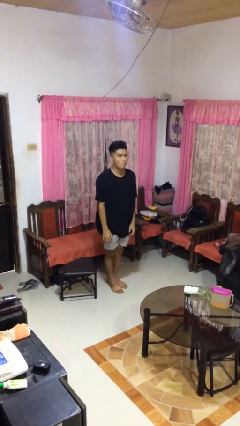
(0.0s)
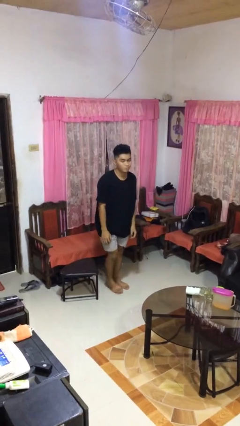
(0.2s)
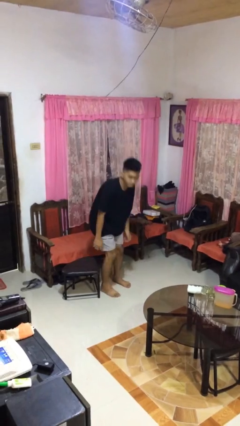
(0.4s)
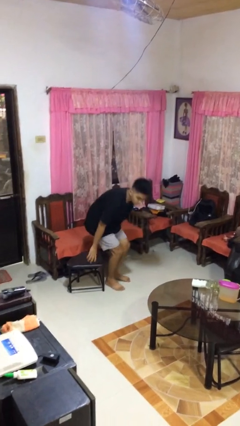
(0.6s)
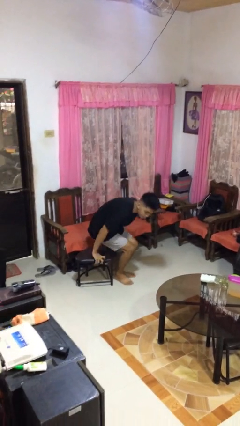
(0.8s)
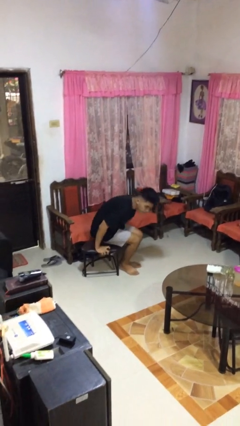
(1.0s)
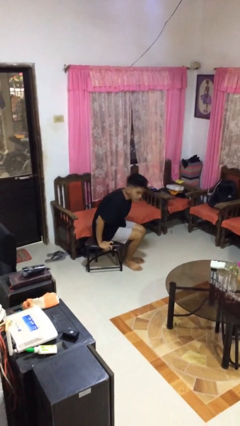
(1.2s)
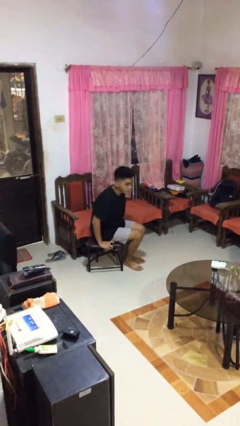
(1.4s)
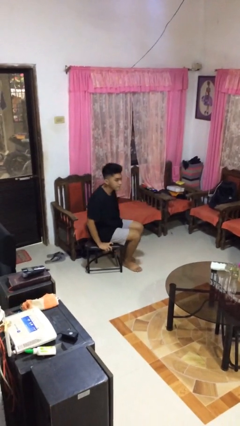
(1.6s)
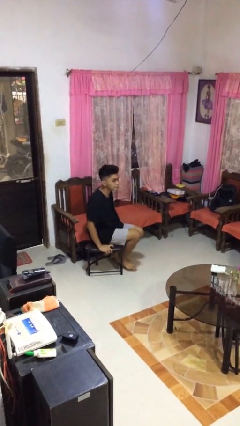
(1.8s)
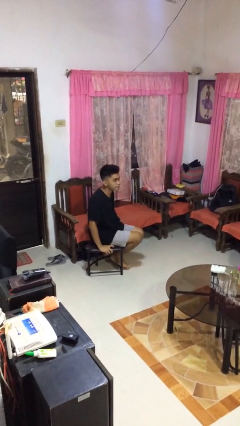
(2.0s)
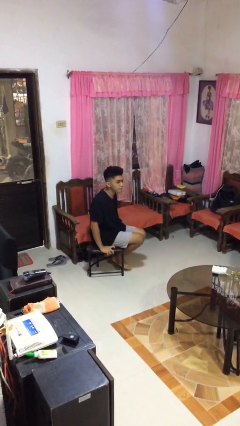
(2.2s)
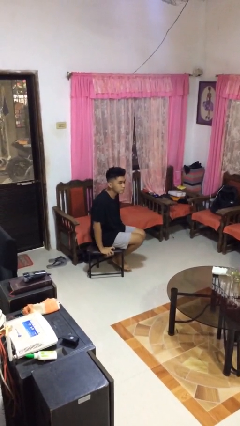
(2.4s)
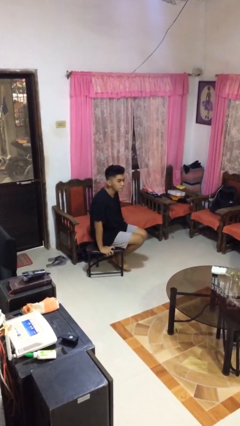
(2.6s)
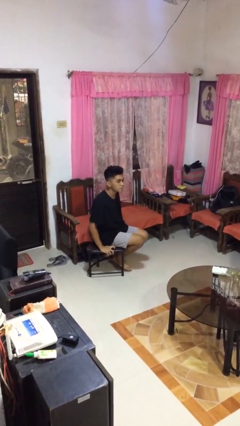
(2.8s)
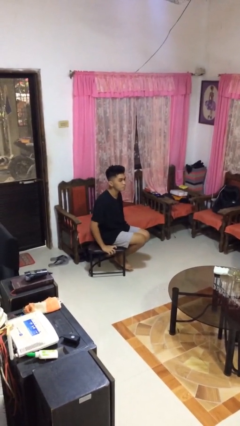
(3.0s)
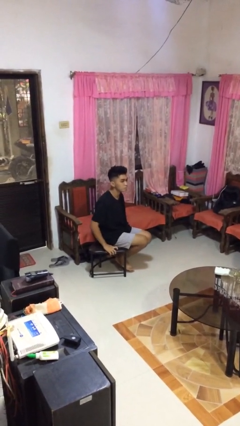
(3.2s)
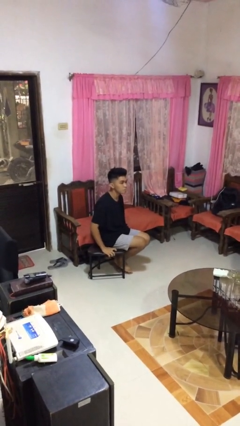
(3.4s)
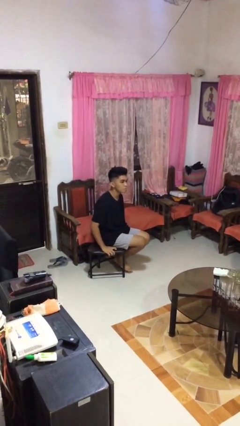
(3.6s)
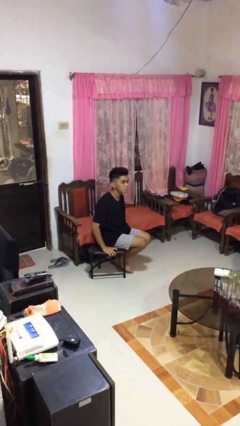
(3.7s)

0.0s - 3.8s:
person sits down

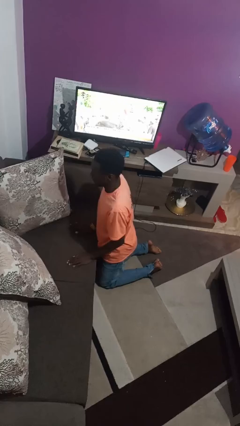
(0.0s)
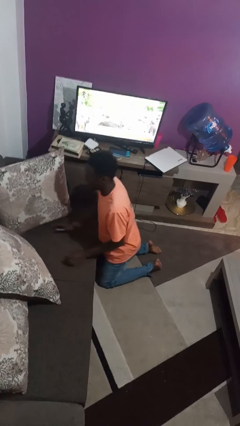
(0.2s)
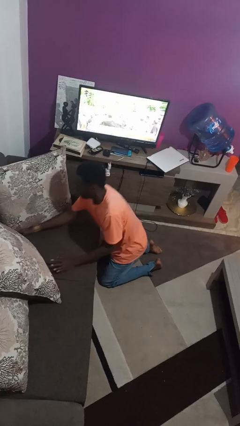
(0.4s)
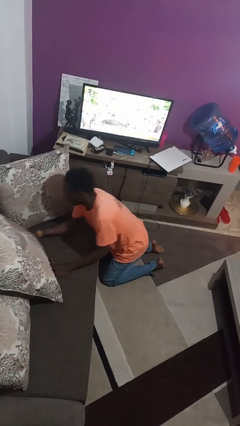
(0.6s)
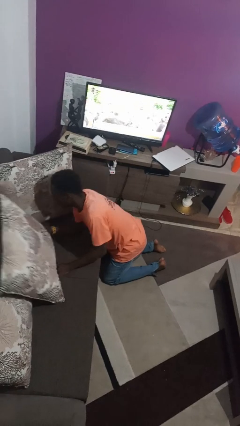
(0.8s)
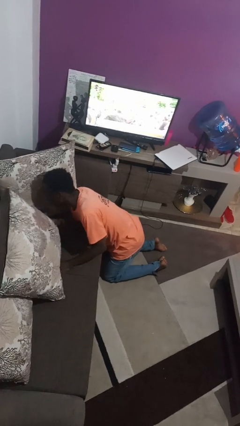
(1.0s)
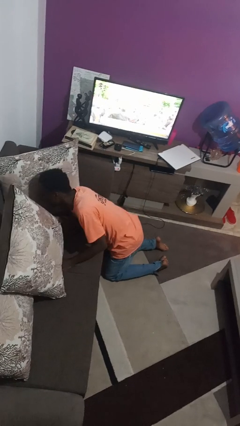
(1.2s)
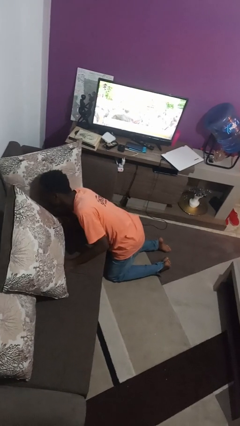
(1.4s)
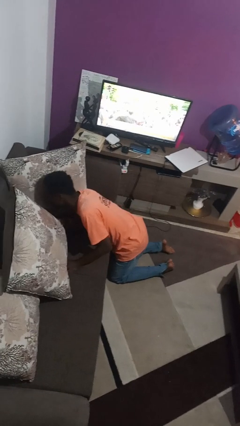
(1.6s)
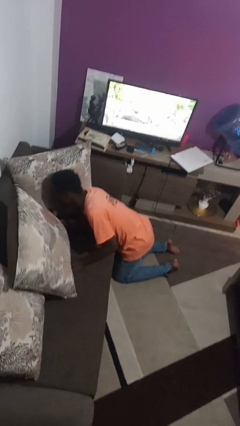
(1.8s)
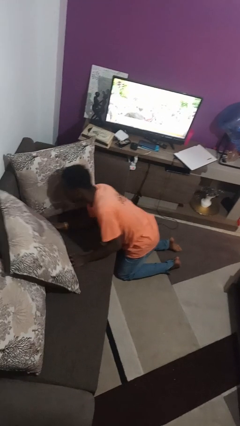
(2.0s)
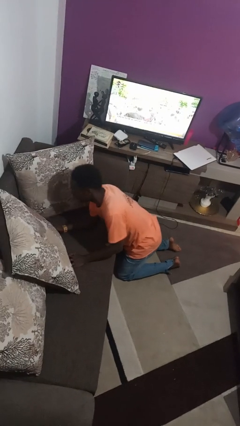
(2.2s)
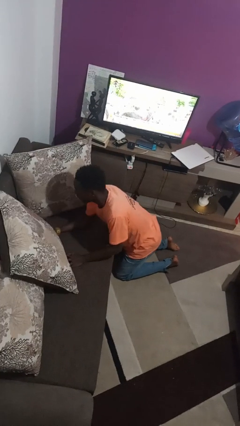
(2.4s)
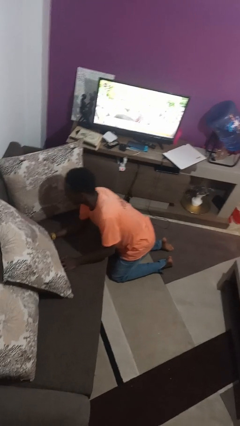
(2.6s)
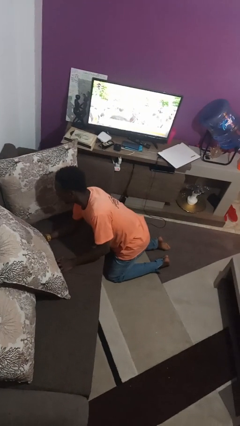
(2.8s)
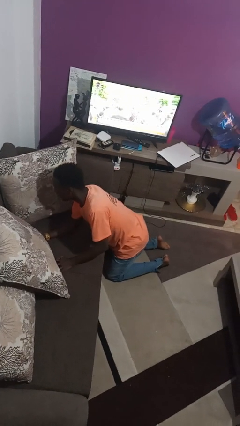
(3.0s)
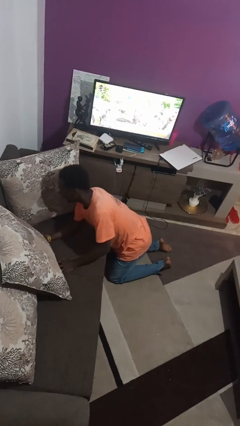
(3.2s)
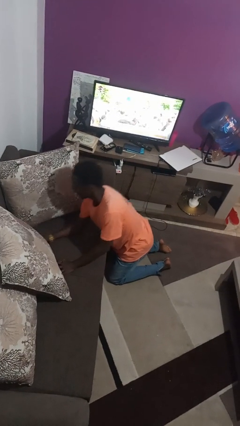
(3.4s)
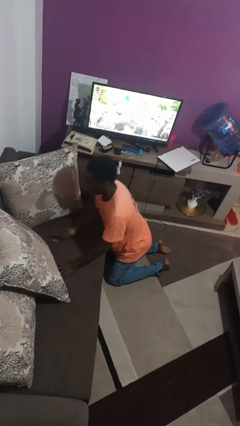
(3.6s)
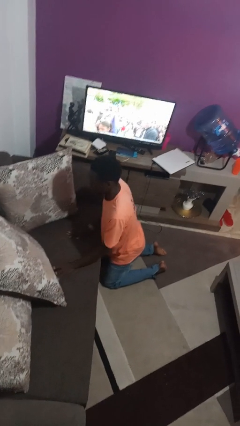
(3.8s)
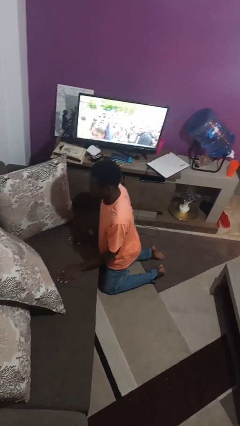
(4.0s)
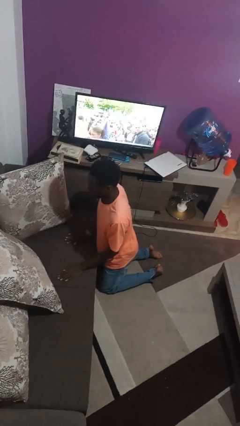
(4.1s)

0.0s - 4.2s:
person searches in couch

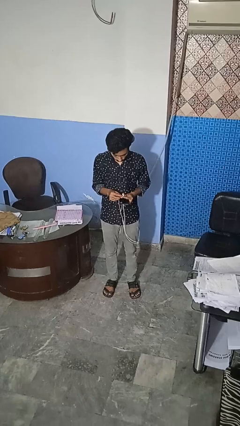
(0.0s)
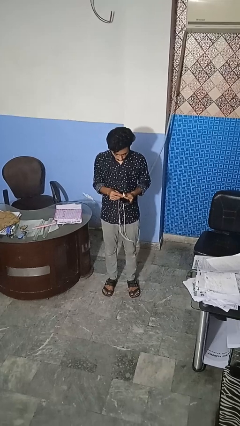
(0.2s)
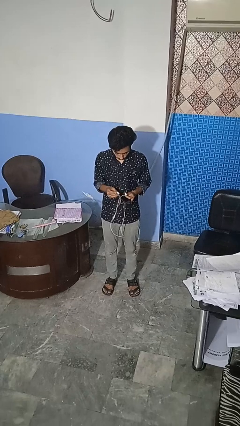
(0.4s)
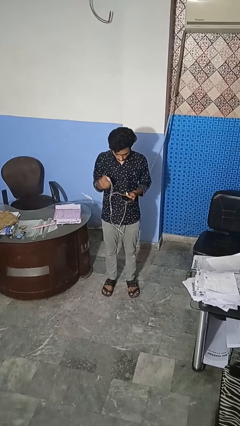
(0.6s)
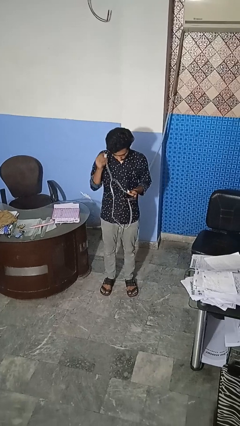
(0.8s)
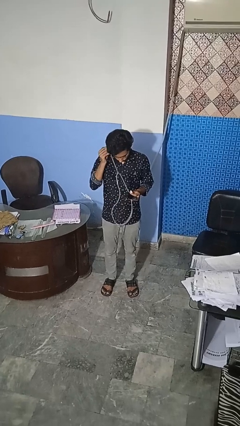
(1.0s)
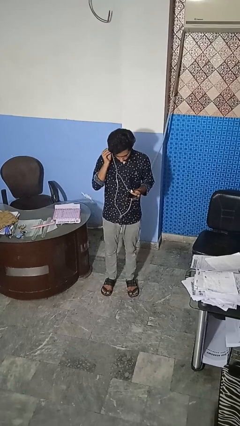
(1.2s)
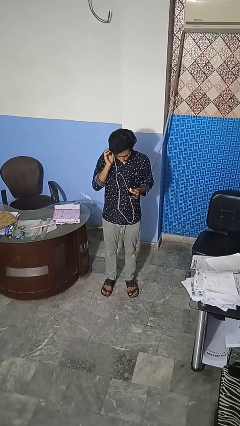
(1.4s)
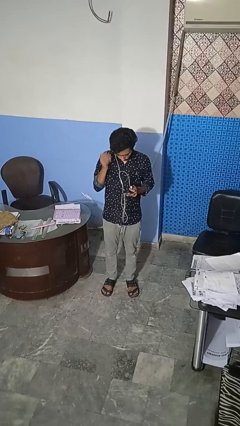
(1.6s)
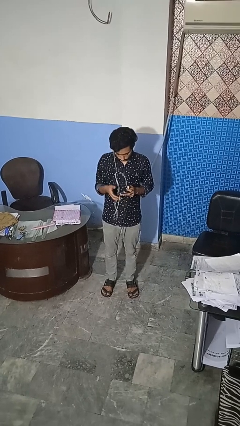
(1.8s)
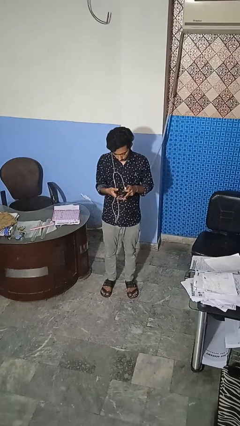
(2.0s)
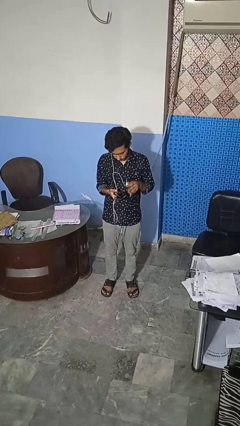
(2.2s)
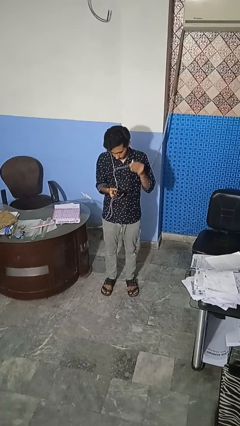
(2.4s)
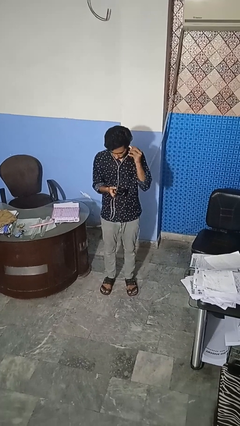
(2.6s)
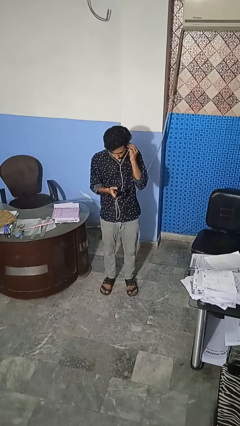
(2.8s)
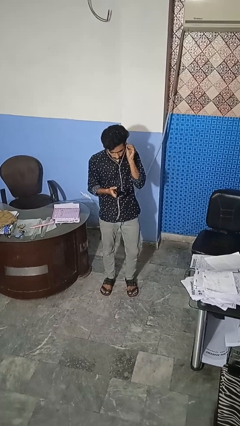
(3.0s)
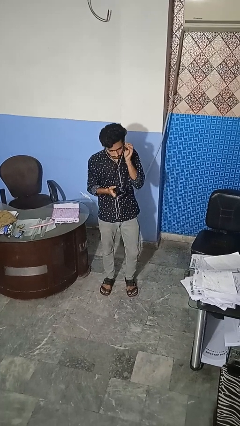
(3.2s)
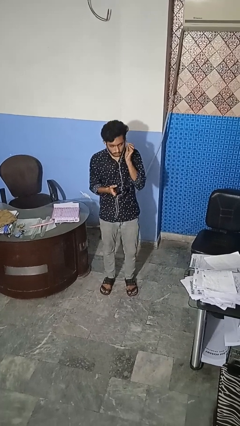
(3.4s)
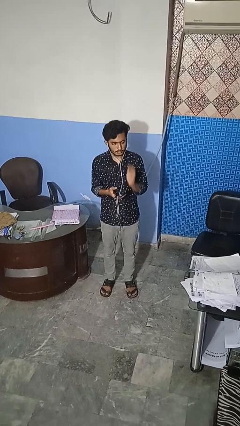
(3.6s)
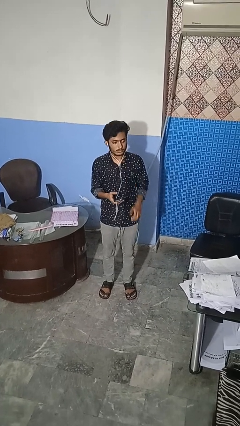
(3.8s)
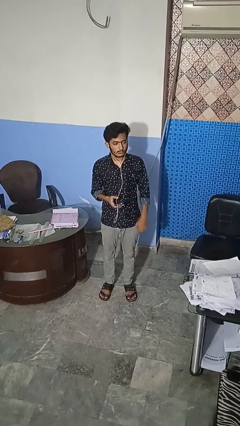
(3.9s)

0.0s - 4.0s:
person puts on headphones

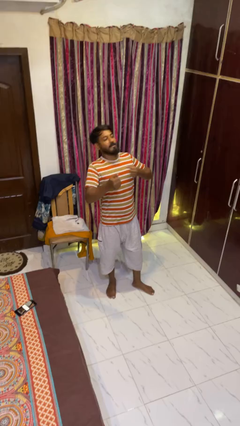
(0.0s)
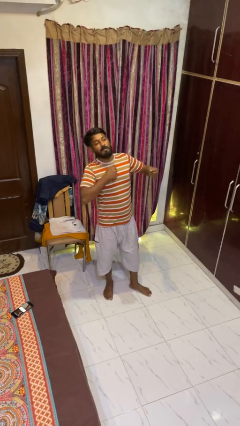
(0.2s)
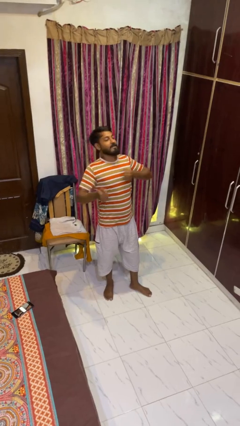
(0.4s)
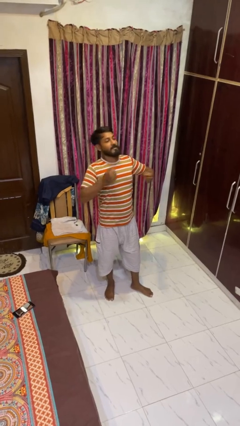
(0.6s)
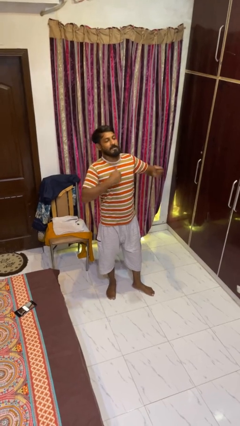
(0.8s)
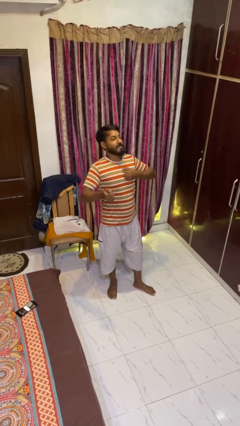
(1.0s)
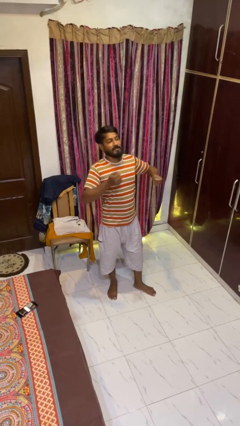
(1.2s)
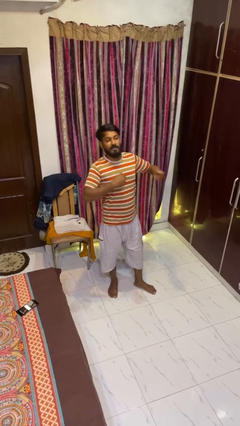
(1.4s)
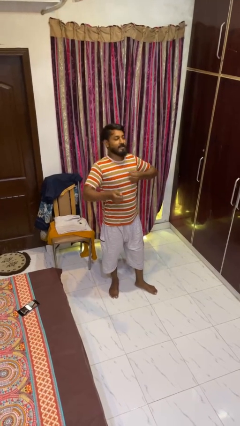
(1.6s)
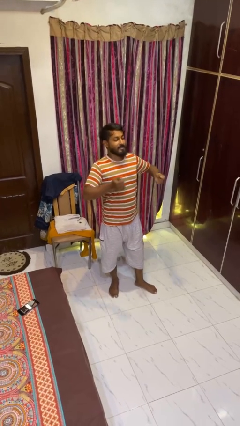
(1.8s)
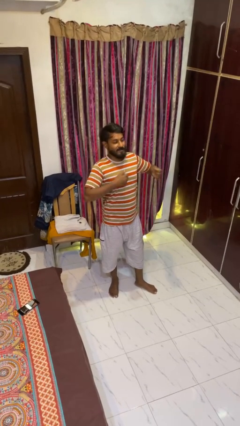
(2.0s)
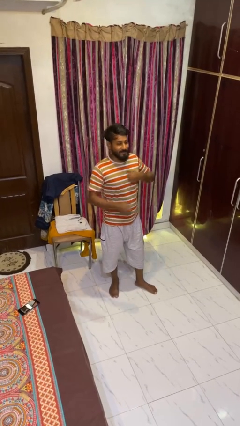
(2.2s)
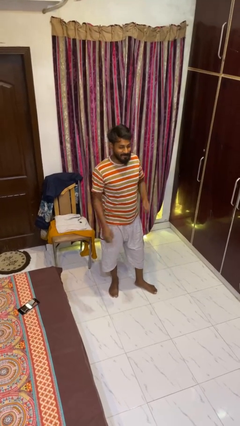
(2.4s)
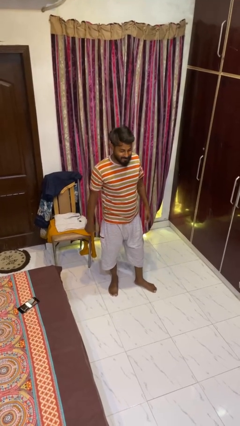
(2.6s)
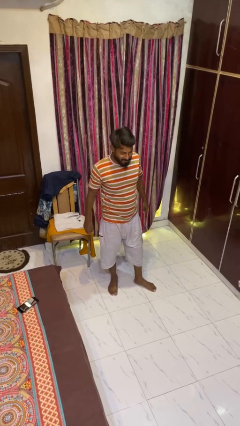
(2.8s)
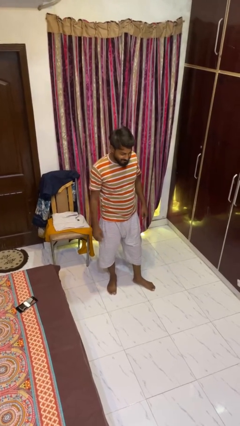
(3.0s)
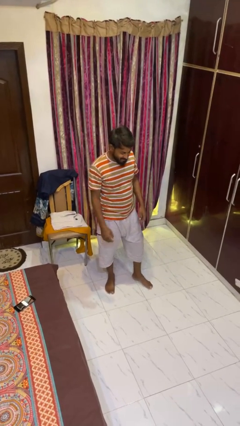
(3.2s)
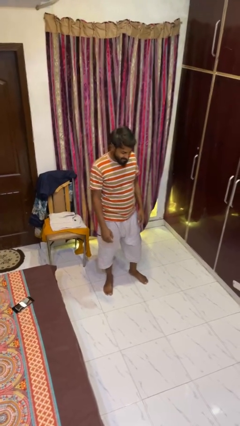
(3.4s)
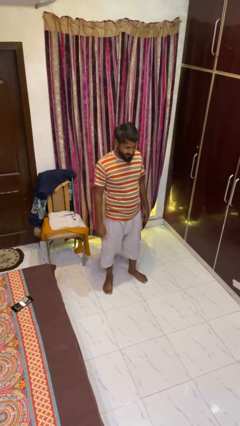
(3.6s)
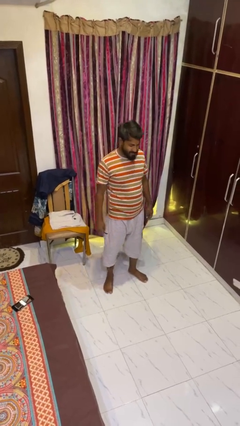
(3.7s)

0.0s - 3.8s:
person drums on chest

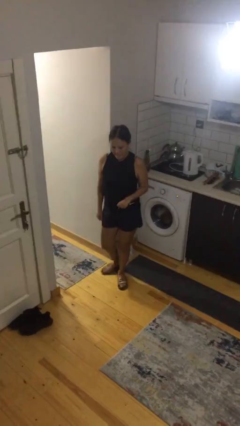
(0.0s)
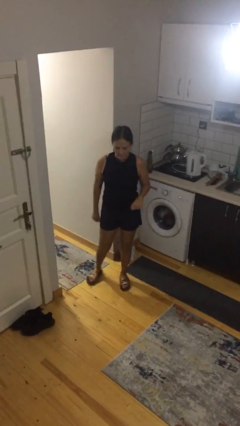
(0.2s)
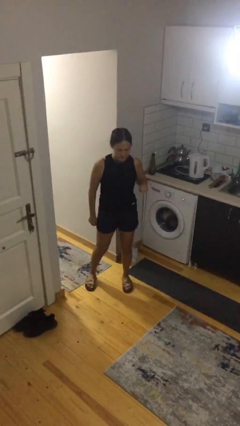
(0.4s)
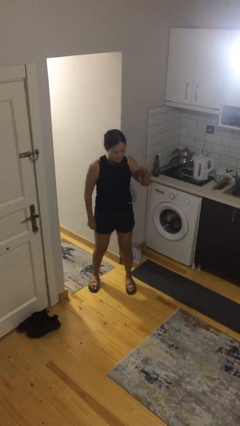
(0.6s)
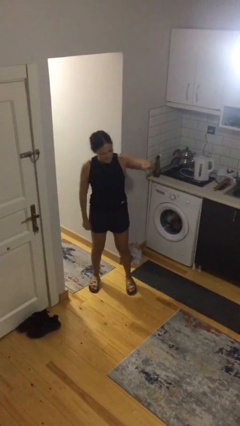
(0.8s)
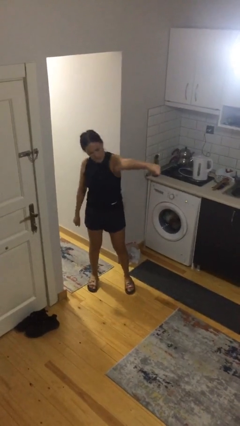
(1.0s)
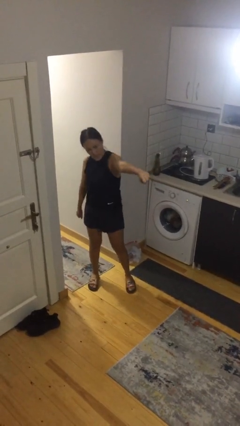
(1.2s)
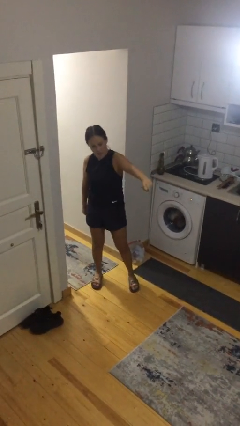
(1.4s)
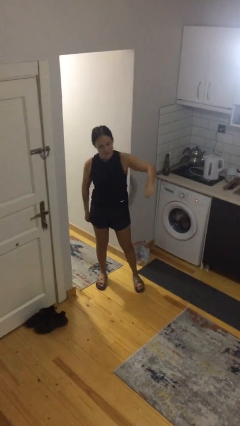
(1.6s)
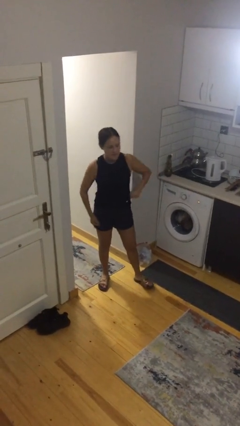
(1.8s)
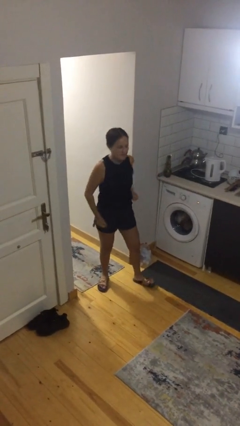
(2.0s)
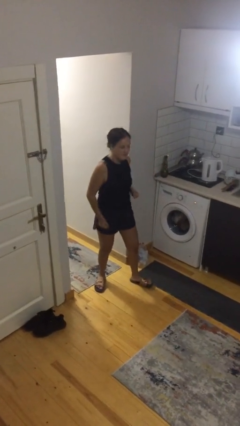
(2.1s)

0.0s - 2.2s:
person punches
